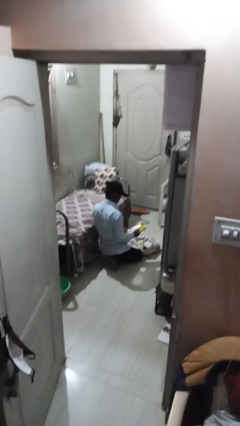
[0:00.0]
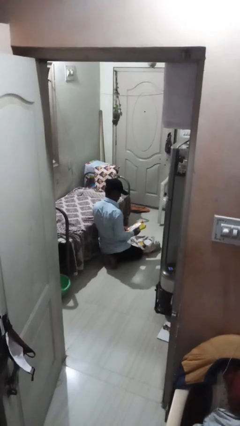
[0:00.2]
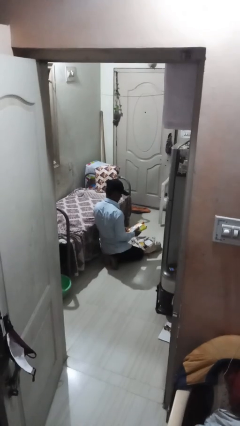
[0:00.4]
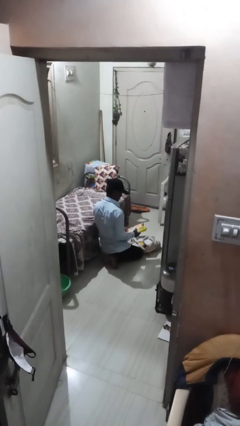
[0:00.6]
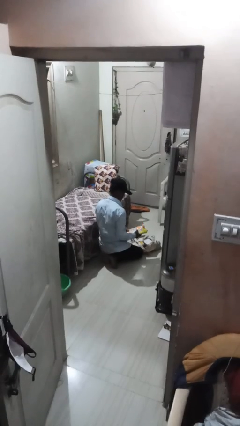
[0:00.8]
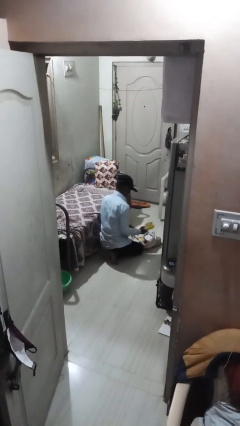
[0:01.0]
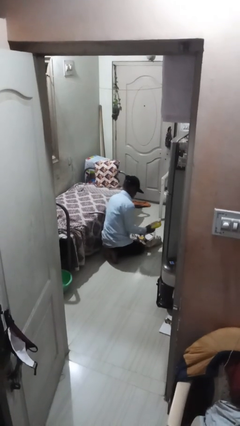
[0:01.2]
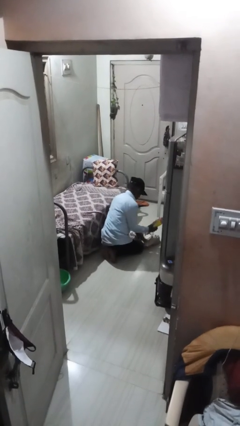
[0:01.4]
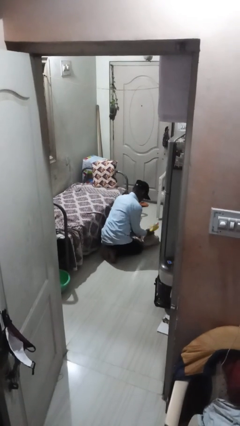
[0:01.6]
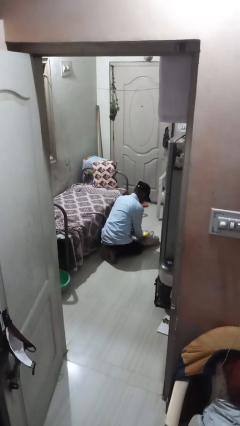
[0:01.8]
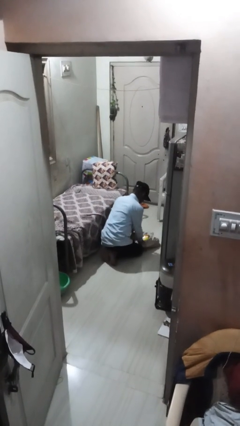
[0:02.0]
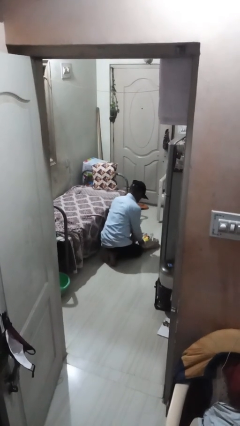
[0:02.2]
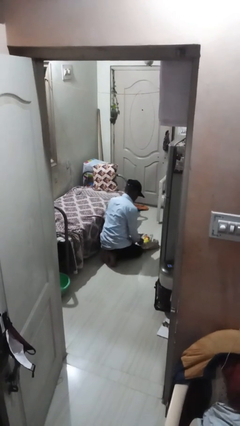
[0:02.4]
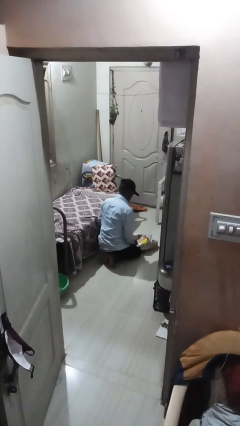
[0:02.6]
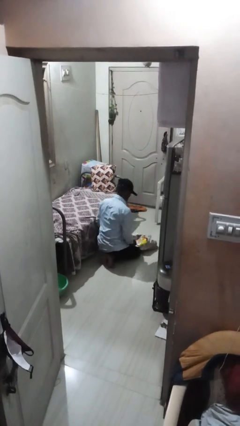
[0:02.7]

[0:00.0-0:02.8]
person puts object into bag

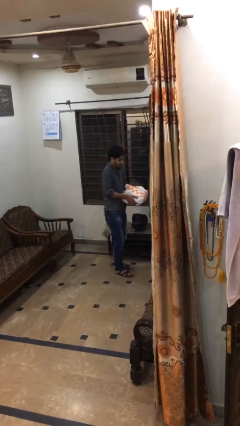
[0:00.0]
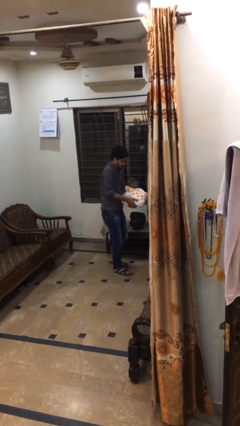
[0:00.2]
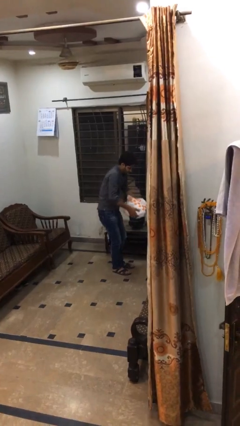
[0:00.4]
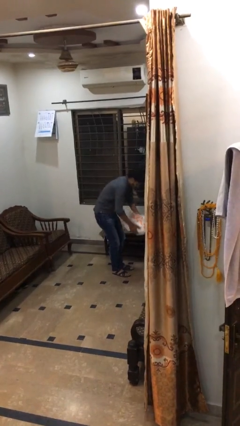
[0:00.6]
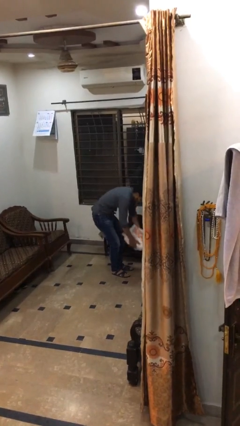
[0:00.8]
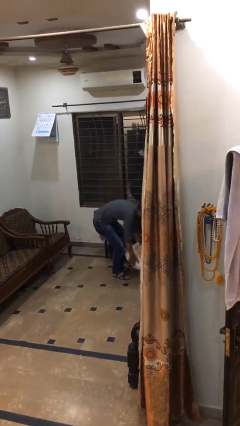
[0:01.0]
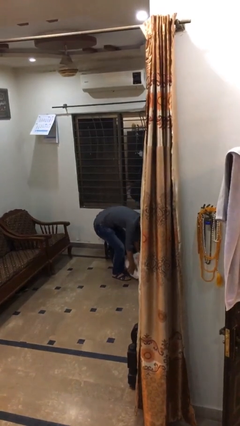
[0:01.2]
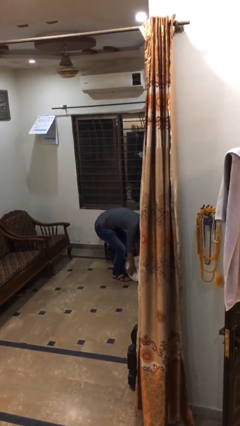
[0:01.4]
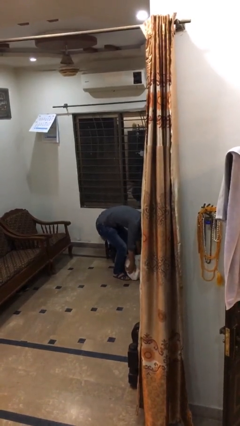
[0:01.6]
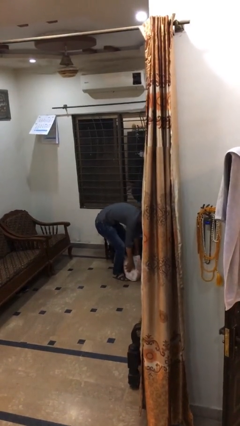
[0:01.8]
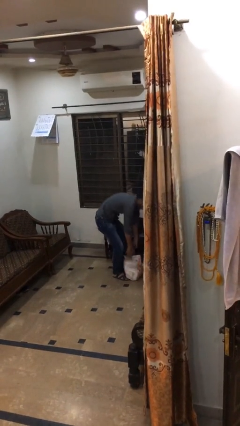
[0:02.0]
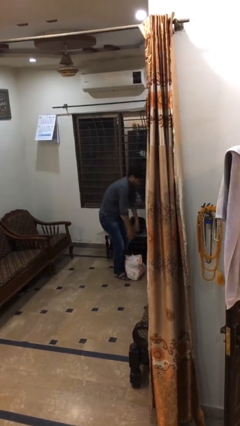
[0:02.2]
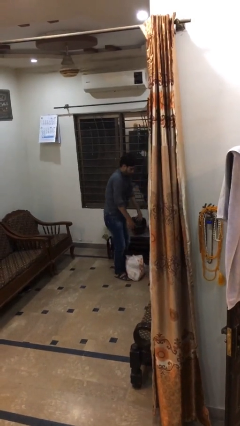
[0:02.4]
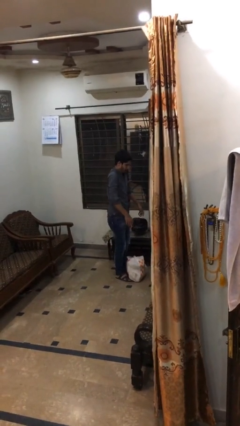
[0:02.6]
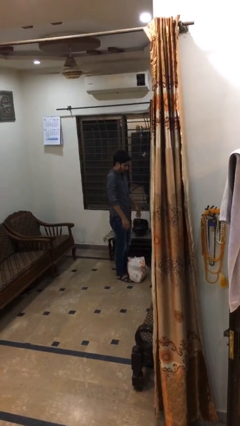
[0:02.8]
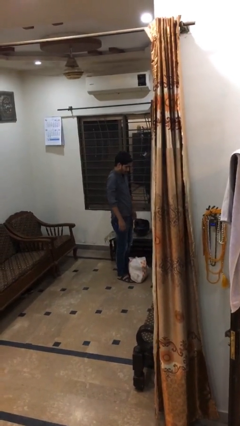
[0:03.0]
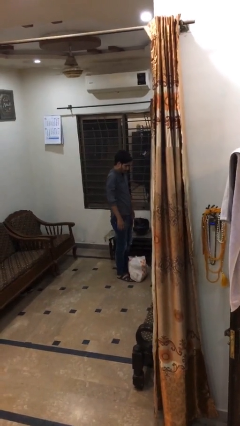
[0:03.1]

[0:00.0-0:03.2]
person puts down object on floor

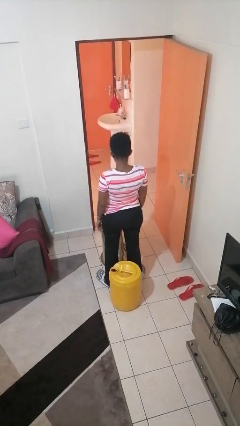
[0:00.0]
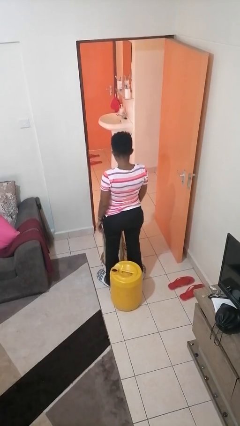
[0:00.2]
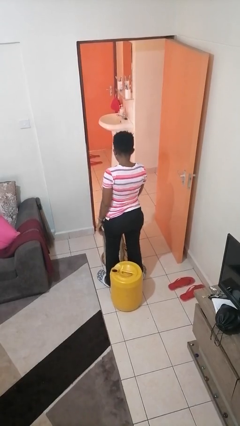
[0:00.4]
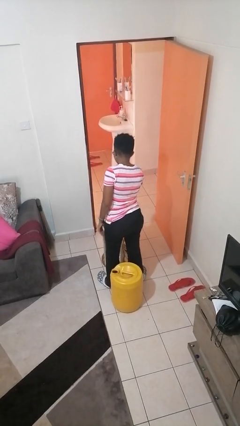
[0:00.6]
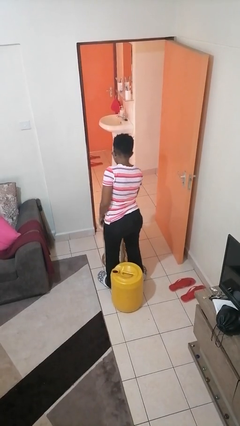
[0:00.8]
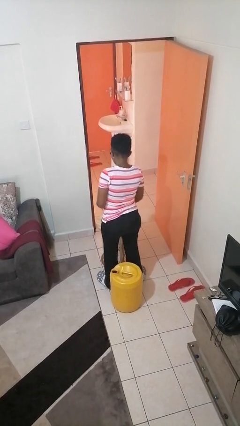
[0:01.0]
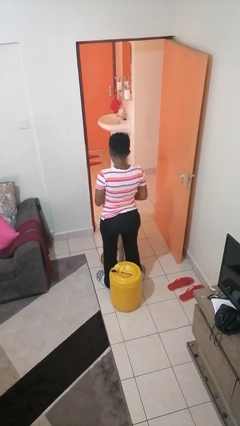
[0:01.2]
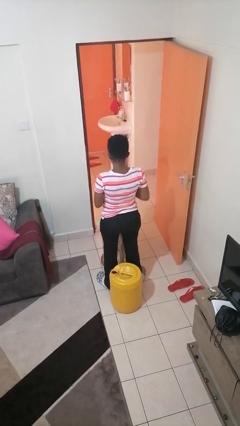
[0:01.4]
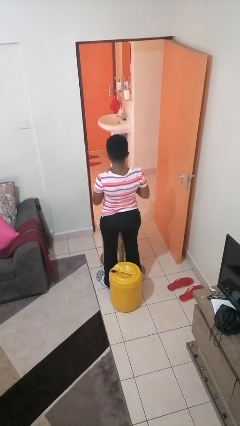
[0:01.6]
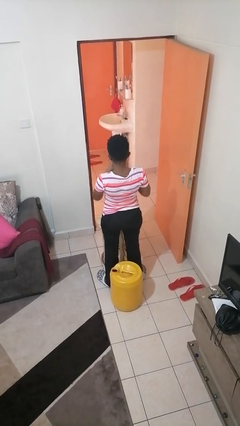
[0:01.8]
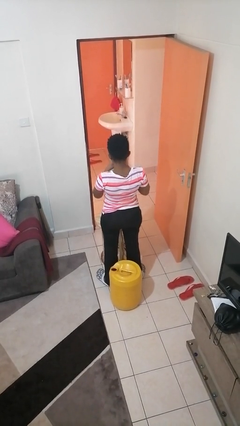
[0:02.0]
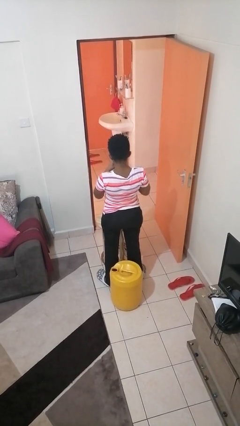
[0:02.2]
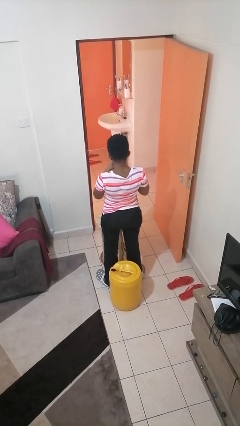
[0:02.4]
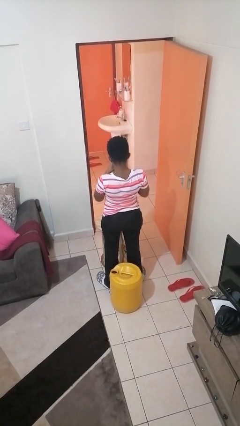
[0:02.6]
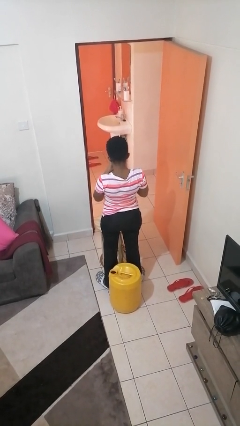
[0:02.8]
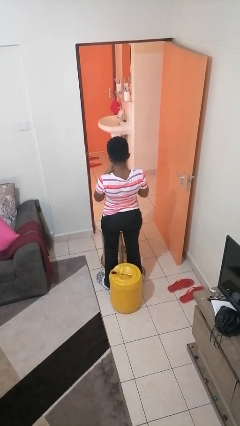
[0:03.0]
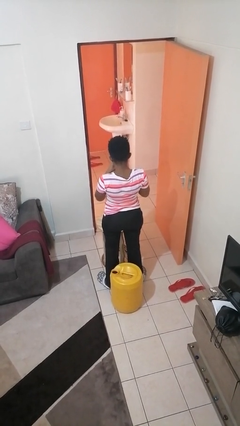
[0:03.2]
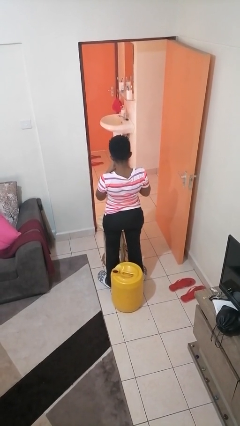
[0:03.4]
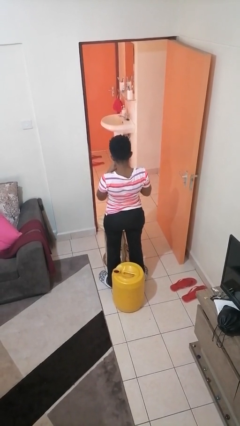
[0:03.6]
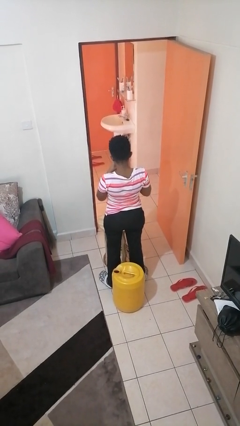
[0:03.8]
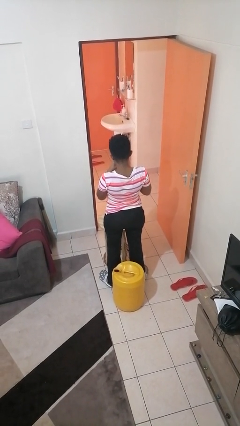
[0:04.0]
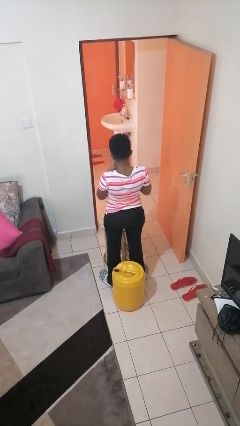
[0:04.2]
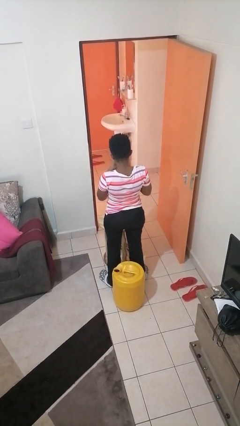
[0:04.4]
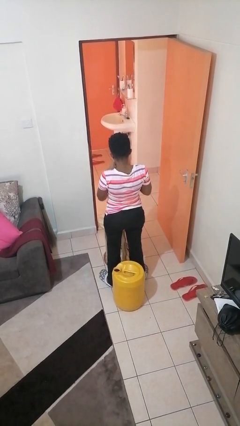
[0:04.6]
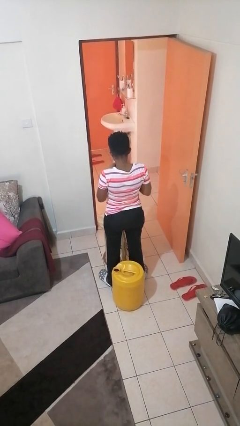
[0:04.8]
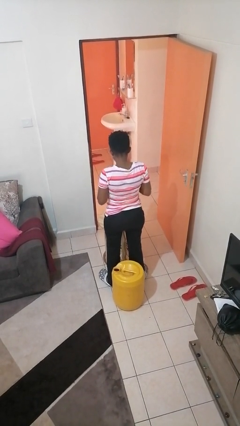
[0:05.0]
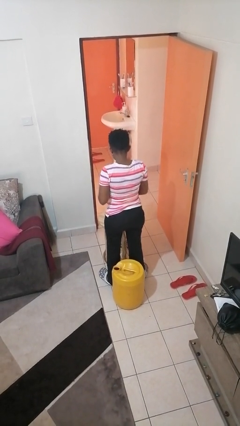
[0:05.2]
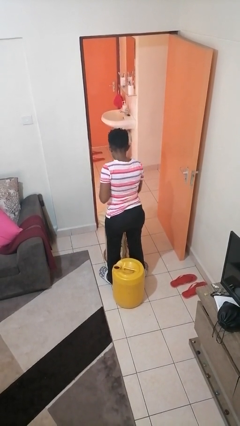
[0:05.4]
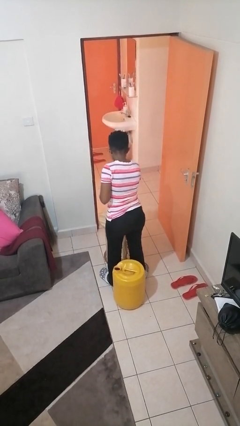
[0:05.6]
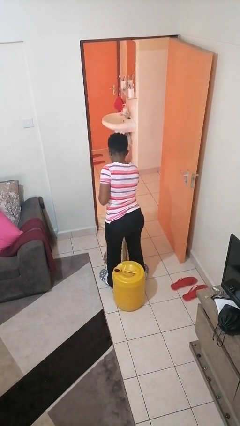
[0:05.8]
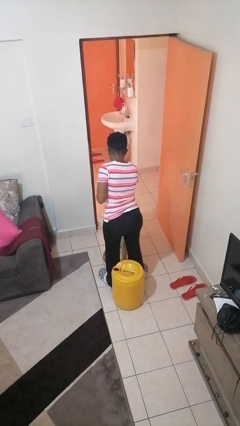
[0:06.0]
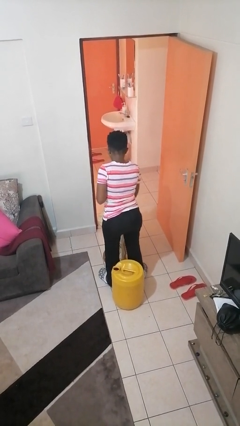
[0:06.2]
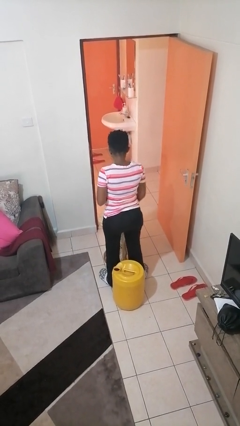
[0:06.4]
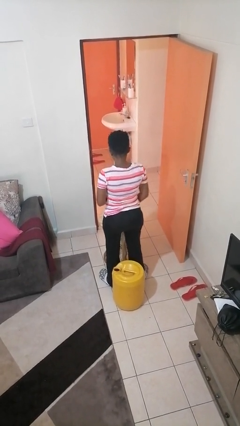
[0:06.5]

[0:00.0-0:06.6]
person drinks from straw

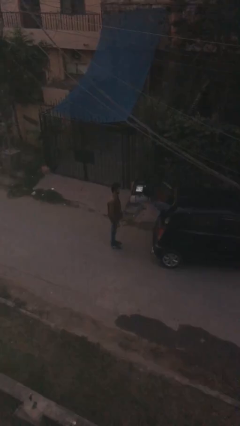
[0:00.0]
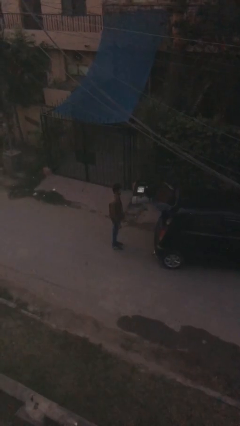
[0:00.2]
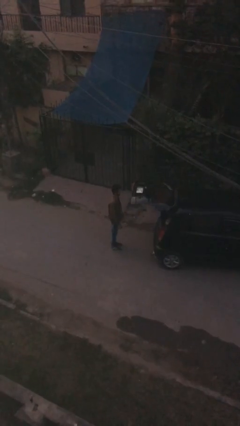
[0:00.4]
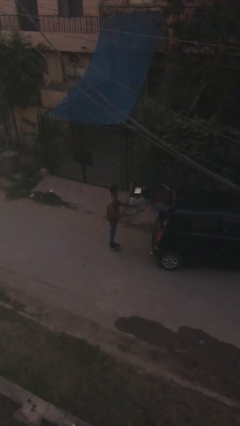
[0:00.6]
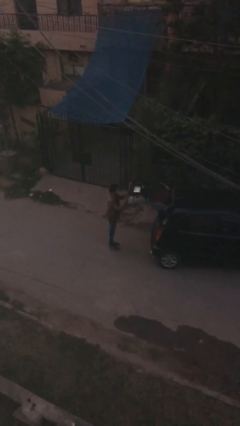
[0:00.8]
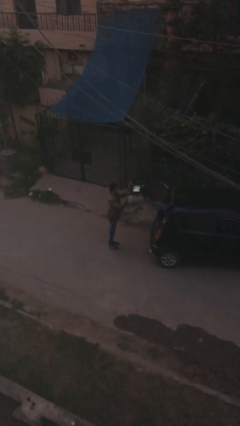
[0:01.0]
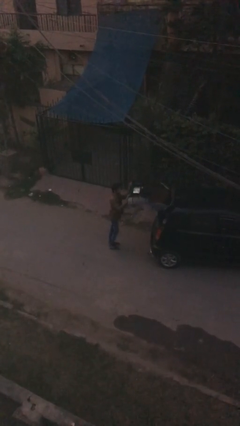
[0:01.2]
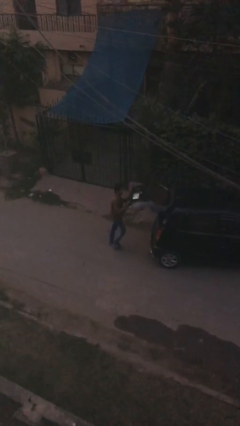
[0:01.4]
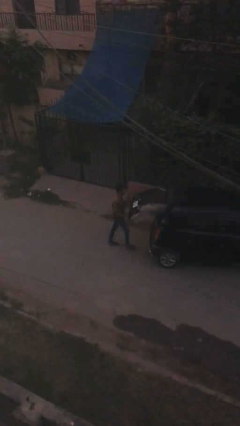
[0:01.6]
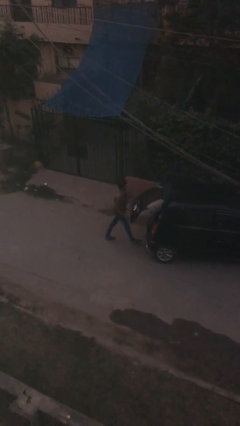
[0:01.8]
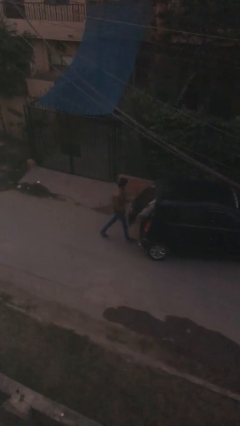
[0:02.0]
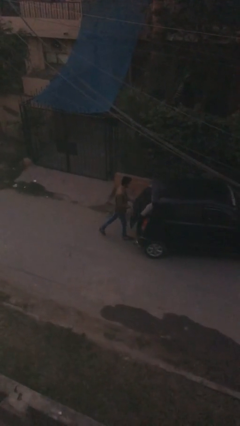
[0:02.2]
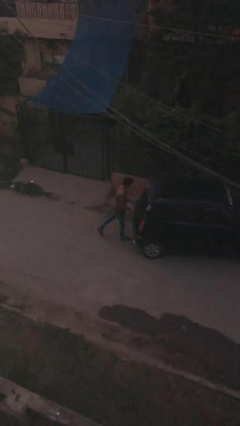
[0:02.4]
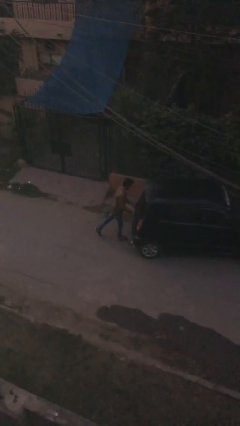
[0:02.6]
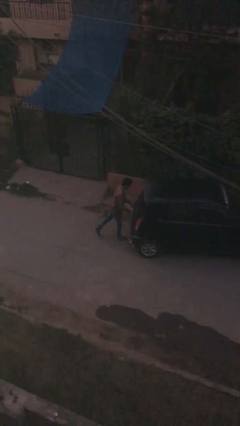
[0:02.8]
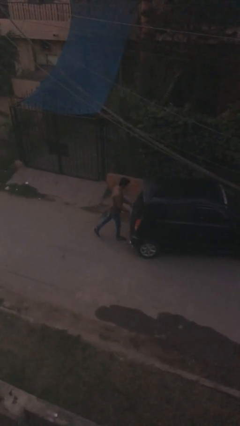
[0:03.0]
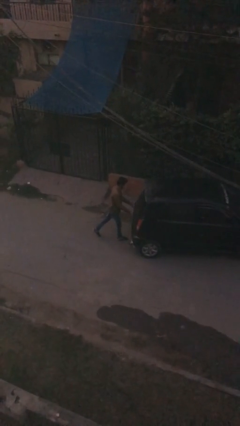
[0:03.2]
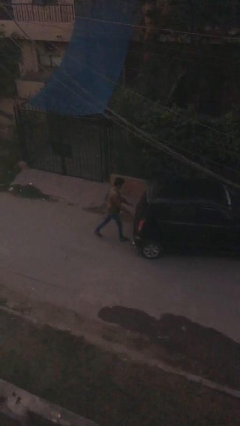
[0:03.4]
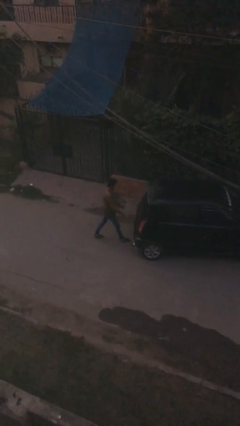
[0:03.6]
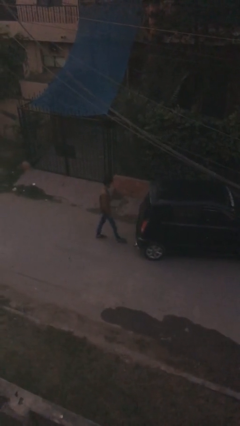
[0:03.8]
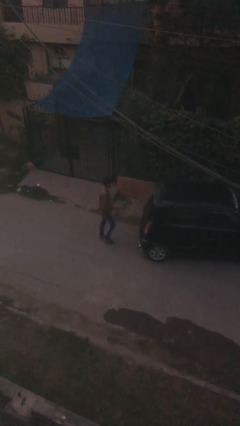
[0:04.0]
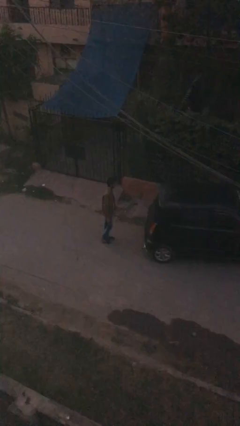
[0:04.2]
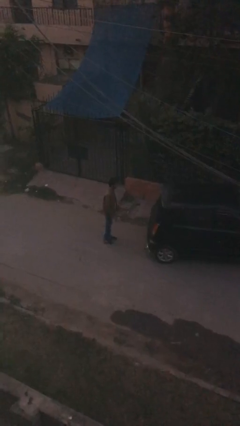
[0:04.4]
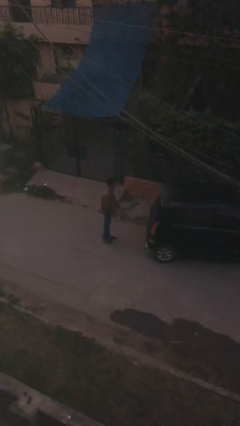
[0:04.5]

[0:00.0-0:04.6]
person closes car trunk

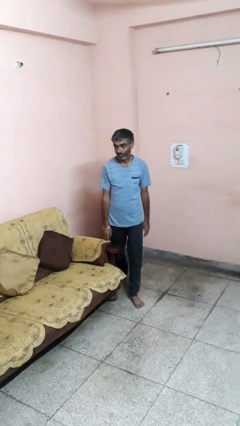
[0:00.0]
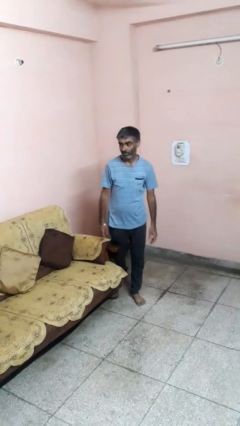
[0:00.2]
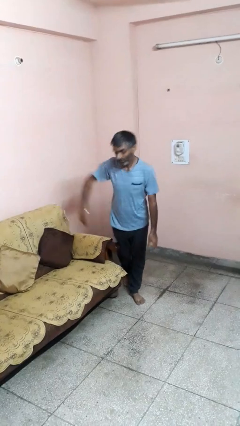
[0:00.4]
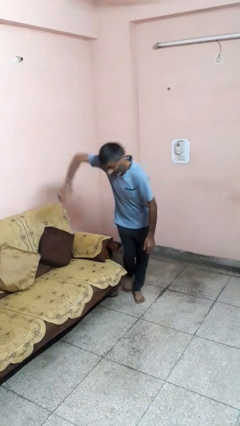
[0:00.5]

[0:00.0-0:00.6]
person trips on object on floor
